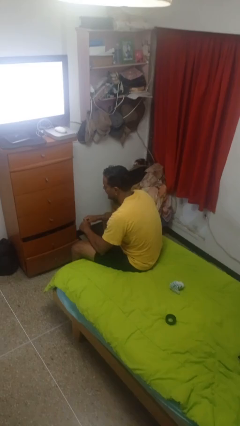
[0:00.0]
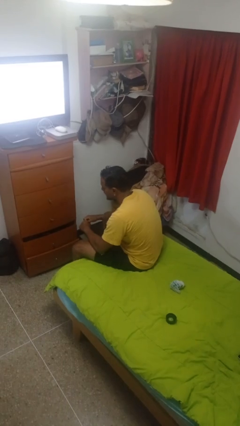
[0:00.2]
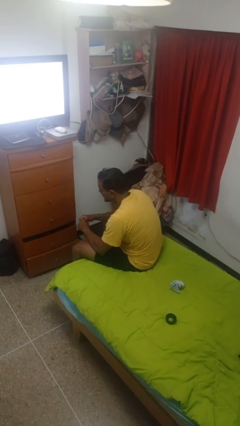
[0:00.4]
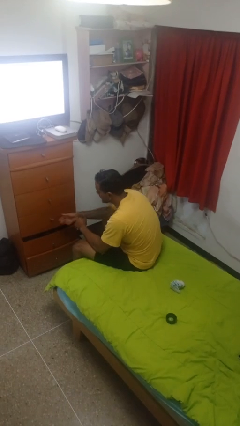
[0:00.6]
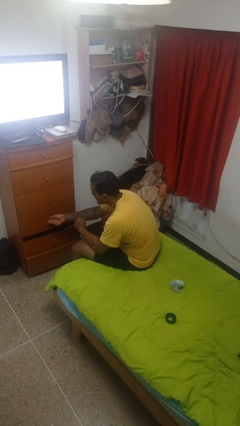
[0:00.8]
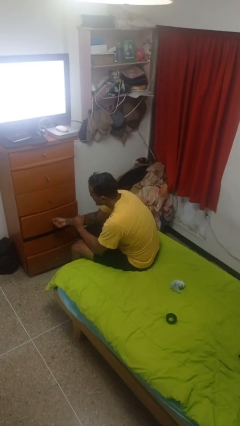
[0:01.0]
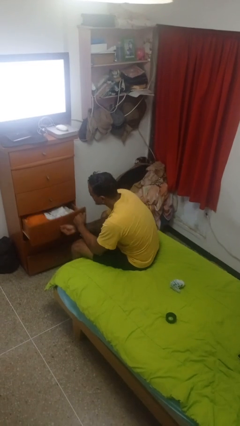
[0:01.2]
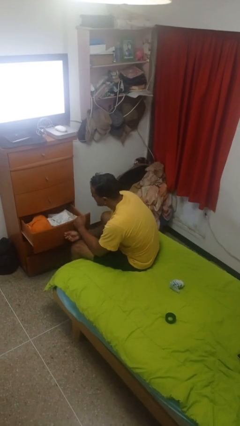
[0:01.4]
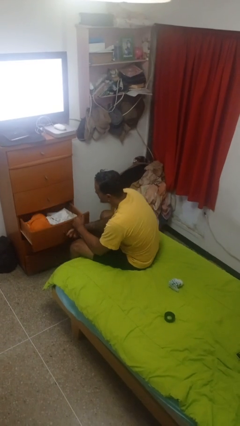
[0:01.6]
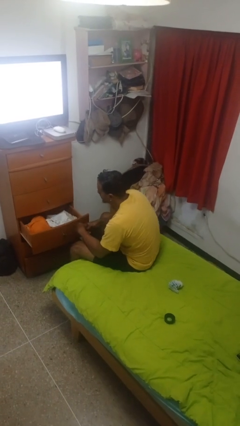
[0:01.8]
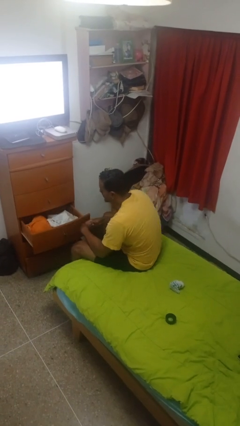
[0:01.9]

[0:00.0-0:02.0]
person opens dresser drawer

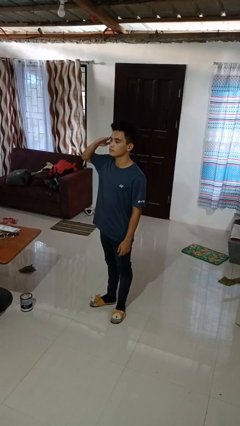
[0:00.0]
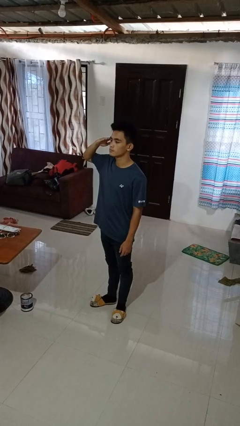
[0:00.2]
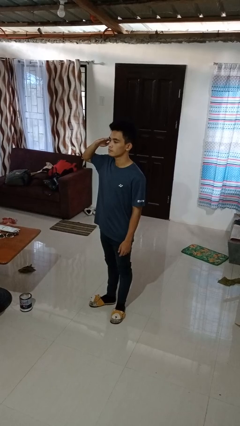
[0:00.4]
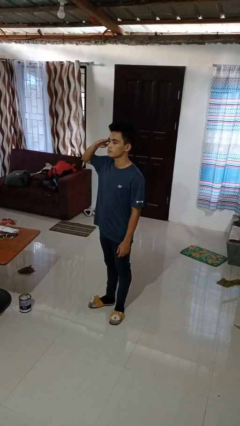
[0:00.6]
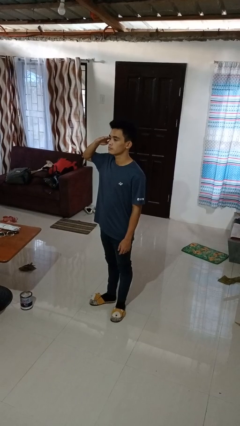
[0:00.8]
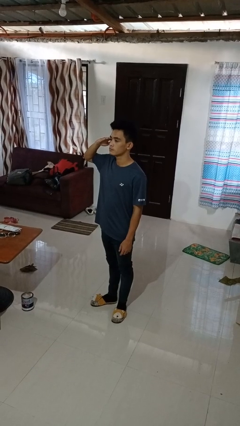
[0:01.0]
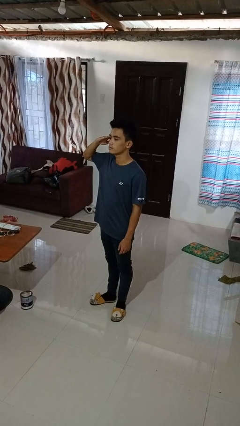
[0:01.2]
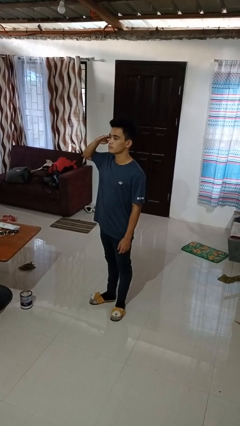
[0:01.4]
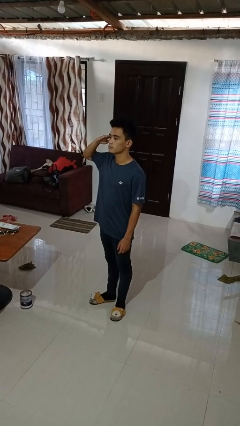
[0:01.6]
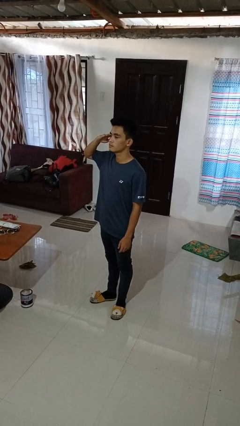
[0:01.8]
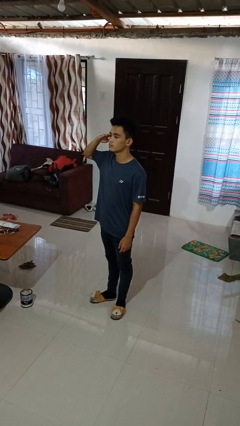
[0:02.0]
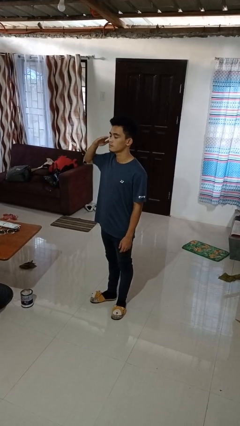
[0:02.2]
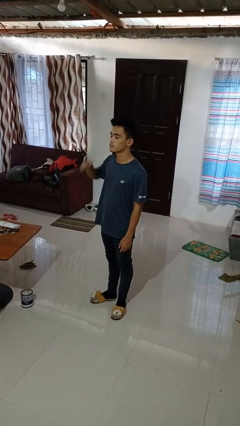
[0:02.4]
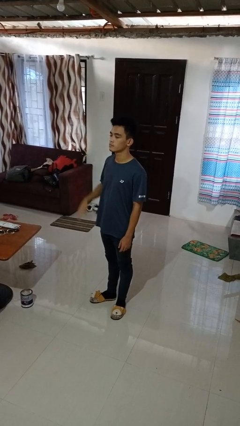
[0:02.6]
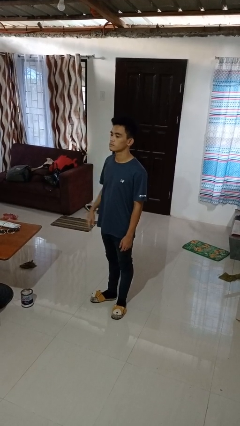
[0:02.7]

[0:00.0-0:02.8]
person salutes

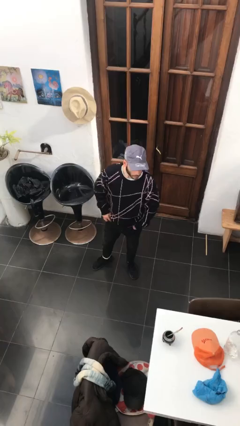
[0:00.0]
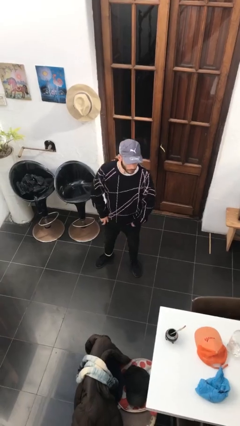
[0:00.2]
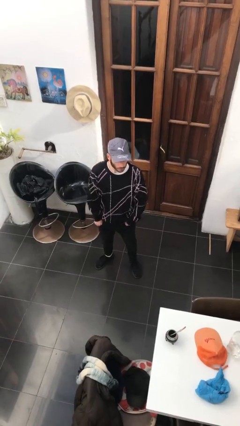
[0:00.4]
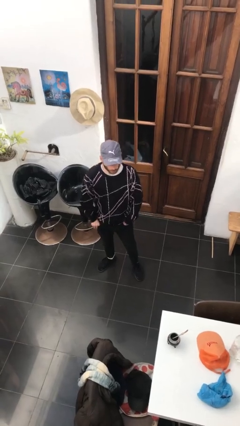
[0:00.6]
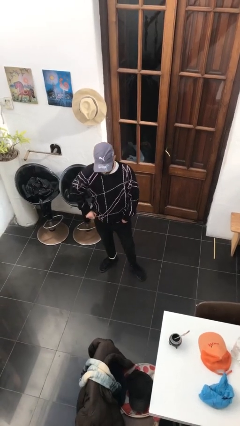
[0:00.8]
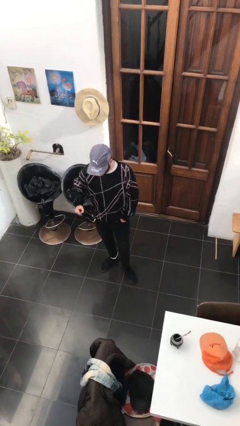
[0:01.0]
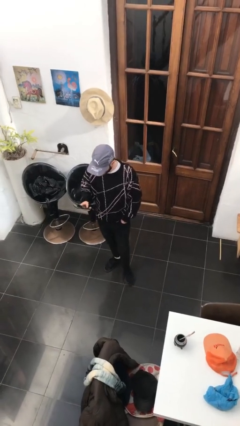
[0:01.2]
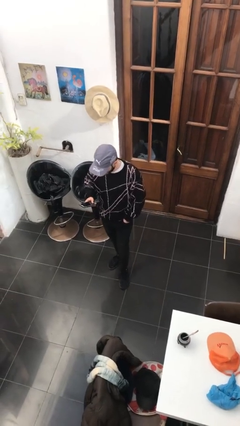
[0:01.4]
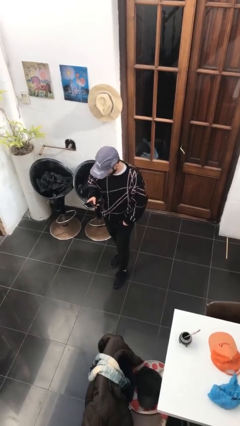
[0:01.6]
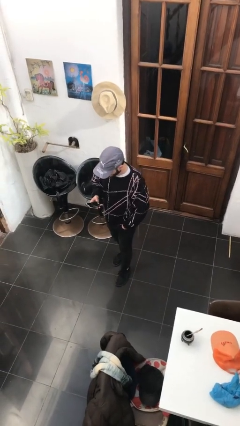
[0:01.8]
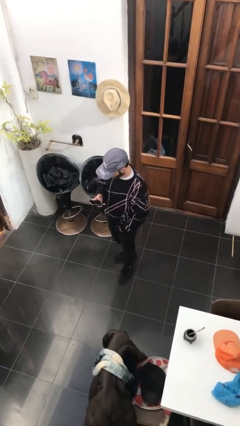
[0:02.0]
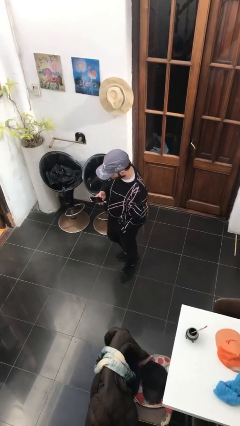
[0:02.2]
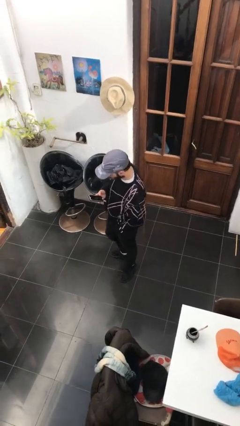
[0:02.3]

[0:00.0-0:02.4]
person takes phone from pocket

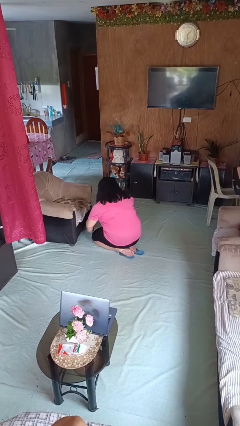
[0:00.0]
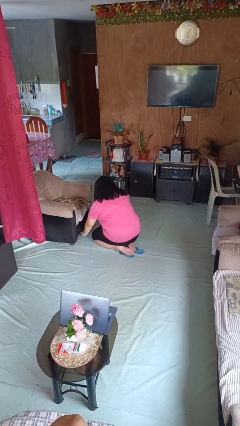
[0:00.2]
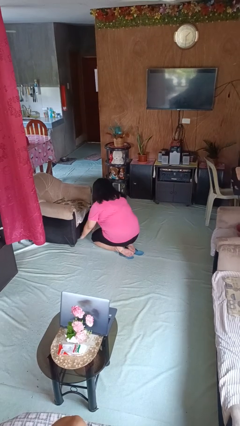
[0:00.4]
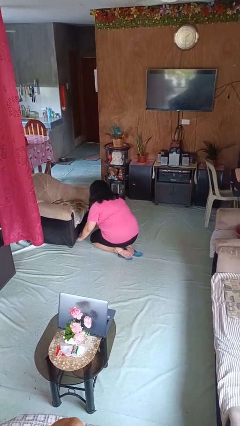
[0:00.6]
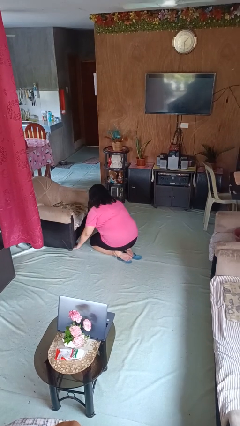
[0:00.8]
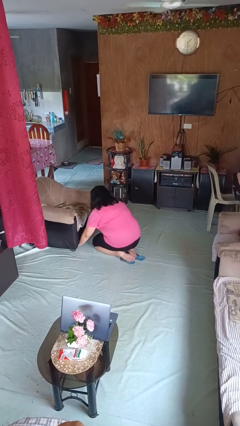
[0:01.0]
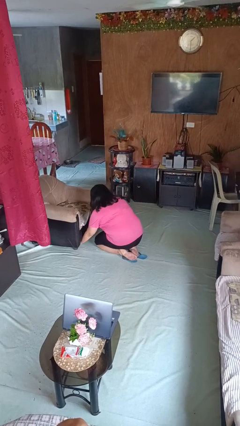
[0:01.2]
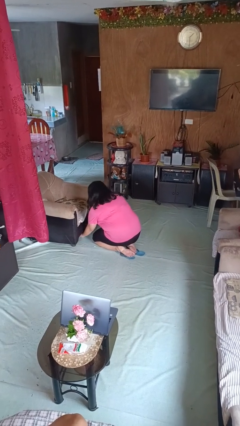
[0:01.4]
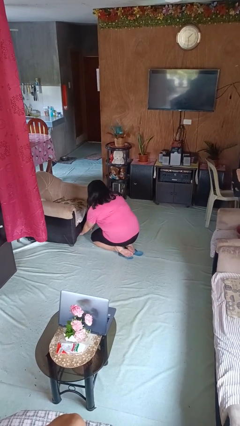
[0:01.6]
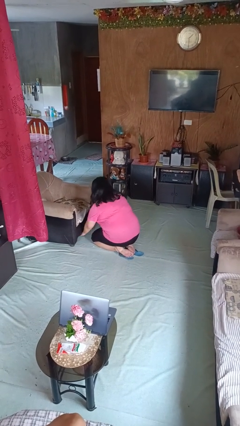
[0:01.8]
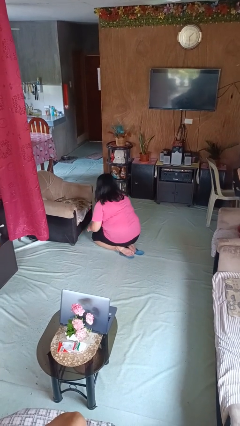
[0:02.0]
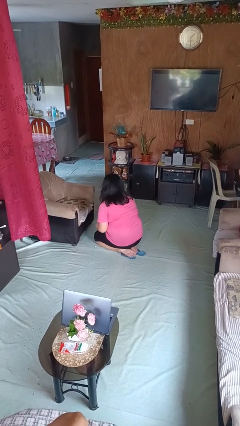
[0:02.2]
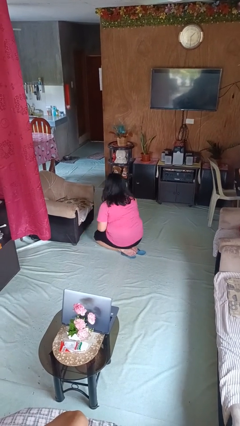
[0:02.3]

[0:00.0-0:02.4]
person searches under couch

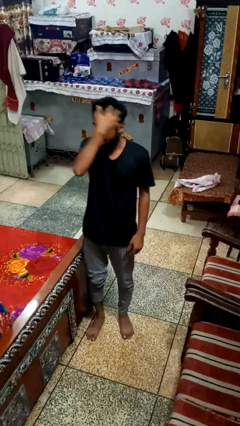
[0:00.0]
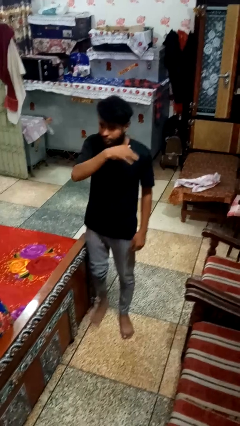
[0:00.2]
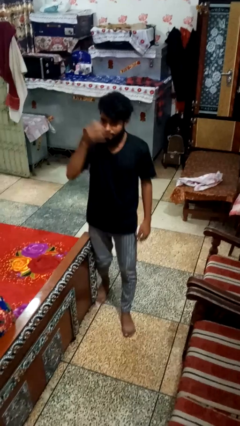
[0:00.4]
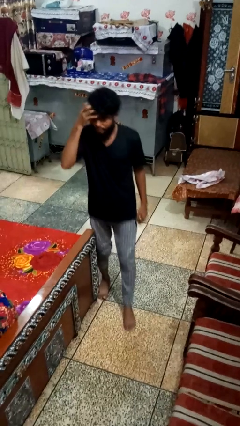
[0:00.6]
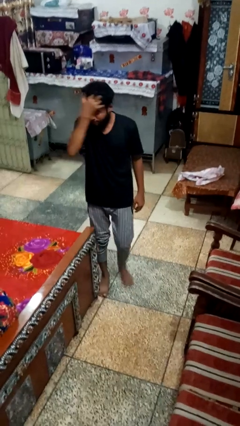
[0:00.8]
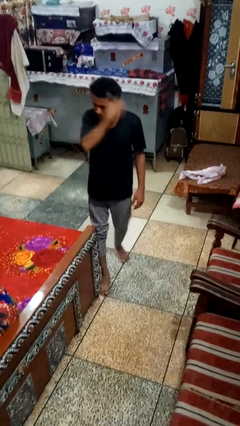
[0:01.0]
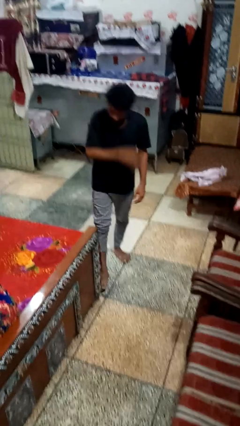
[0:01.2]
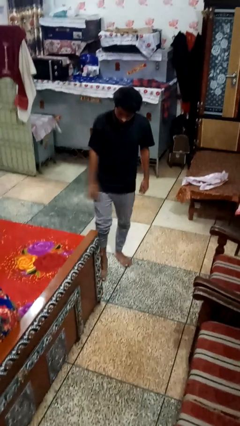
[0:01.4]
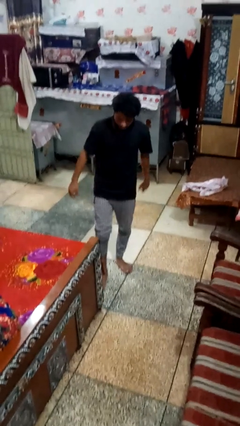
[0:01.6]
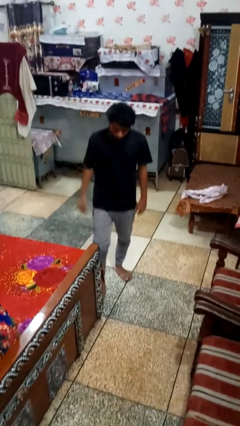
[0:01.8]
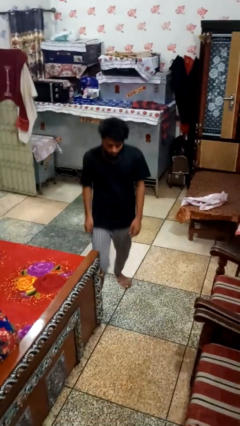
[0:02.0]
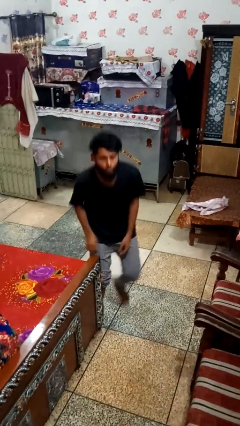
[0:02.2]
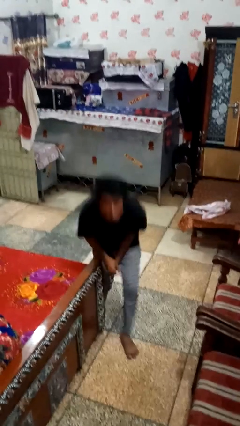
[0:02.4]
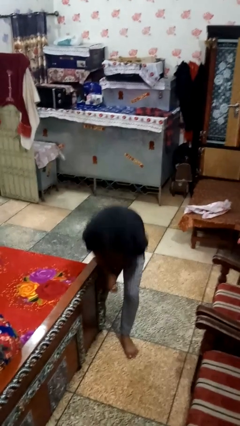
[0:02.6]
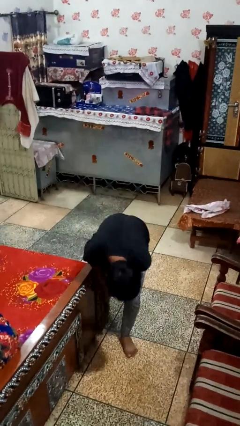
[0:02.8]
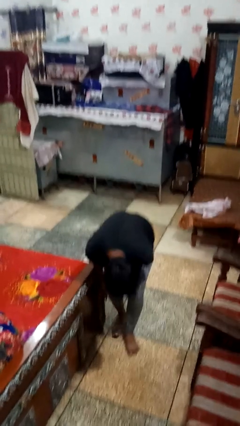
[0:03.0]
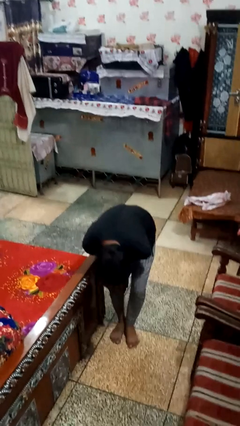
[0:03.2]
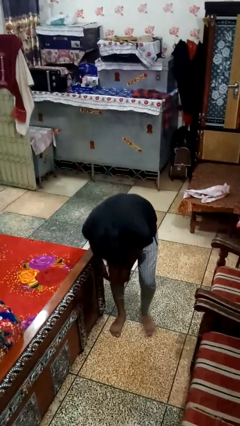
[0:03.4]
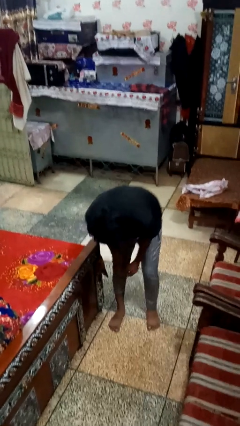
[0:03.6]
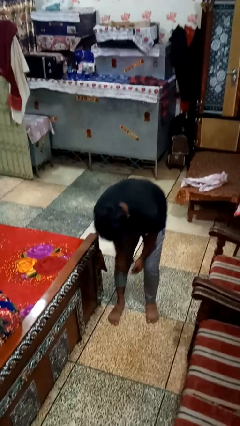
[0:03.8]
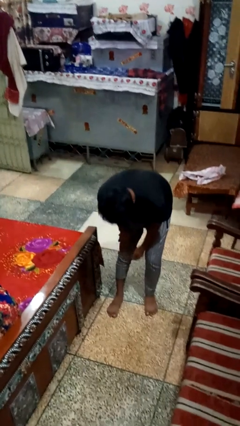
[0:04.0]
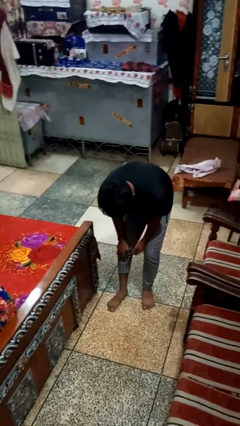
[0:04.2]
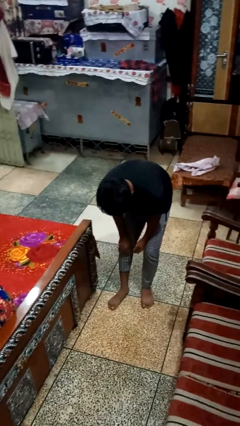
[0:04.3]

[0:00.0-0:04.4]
person trips on object on floor

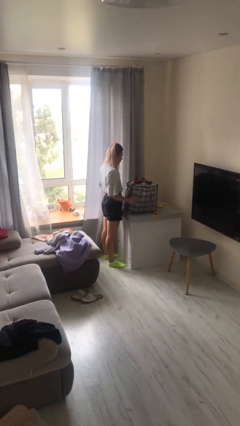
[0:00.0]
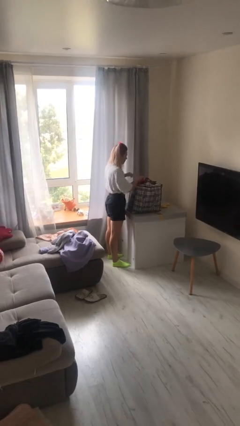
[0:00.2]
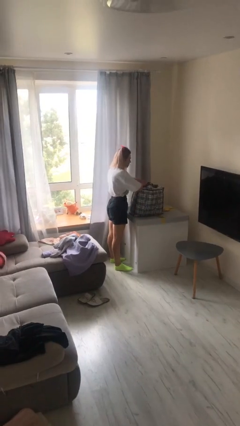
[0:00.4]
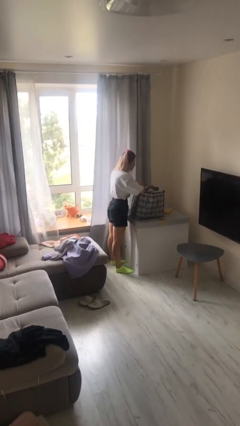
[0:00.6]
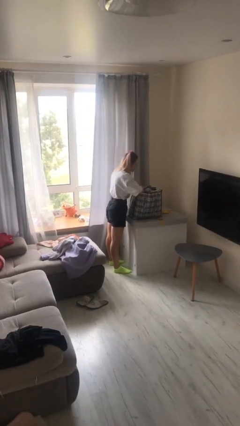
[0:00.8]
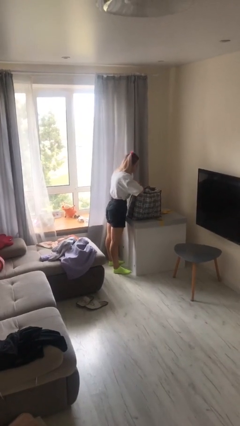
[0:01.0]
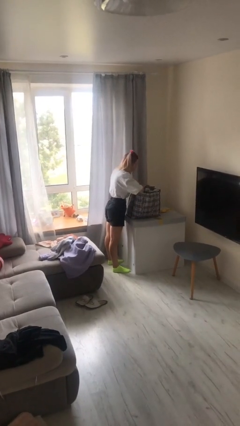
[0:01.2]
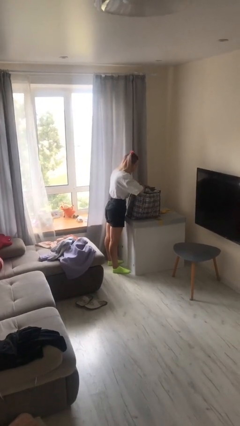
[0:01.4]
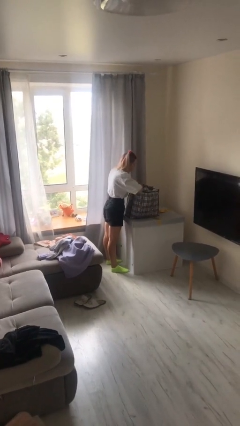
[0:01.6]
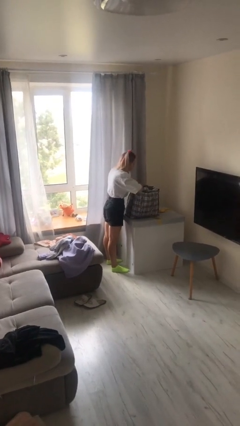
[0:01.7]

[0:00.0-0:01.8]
person searches in bag

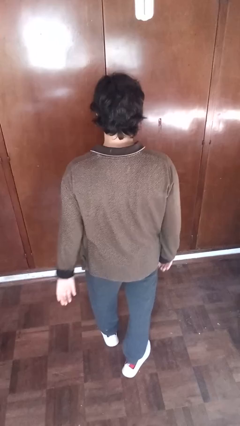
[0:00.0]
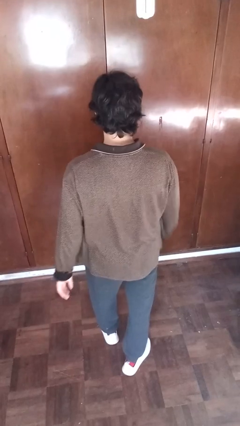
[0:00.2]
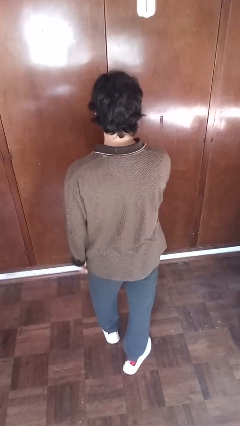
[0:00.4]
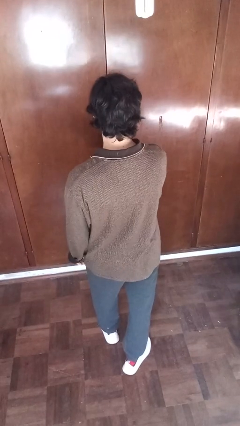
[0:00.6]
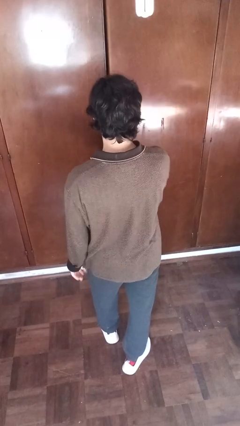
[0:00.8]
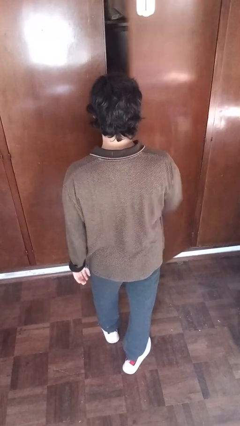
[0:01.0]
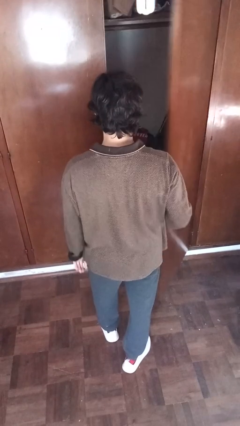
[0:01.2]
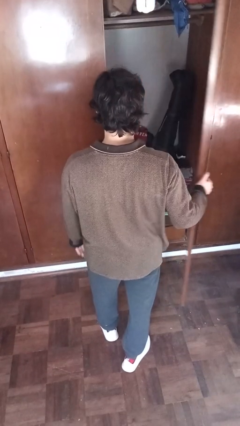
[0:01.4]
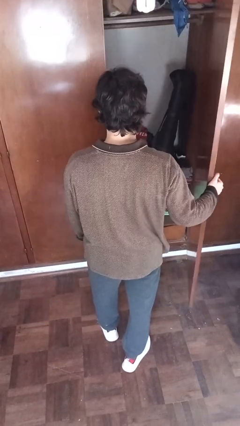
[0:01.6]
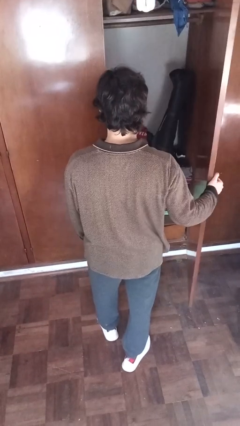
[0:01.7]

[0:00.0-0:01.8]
person opens closet door
